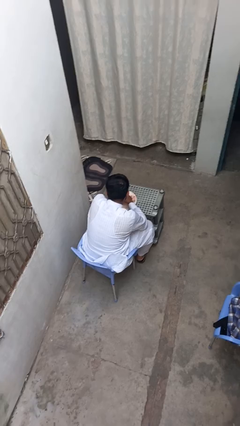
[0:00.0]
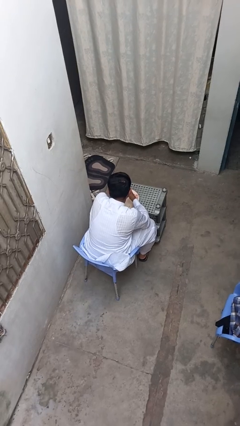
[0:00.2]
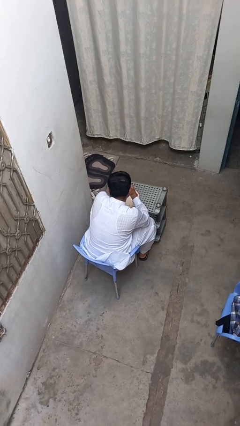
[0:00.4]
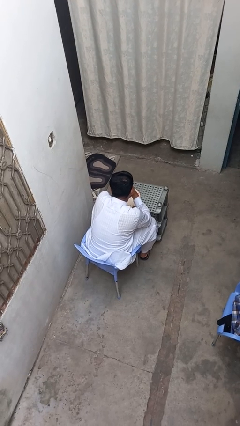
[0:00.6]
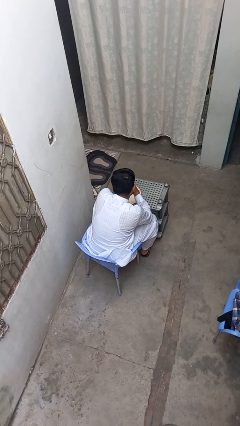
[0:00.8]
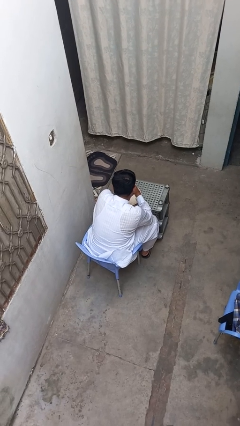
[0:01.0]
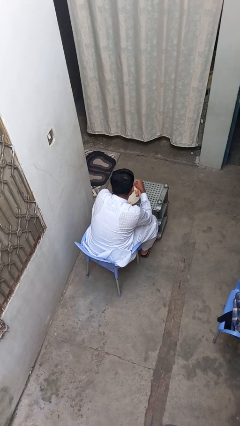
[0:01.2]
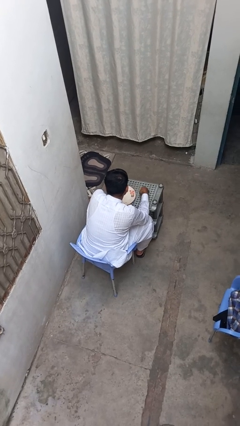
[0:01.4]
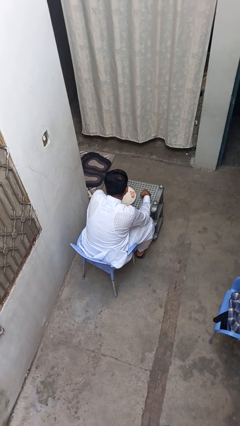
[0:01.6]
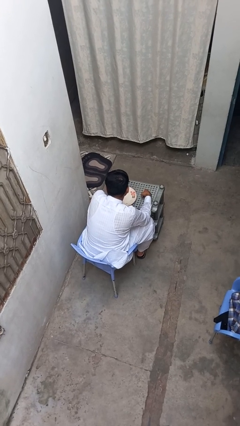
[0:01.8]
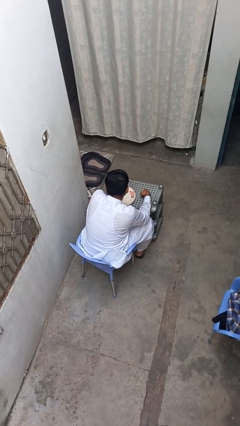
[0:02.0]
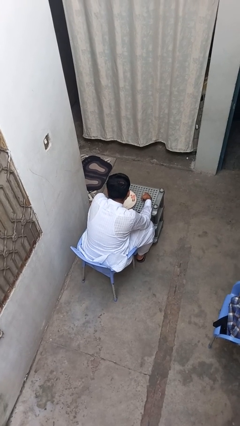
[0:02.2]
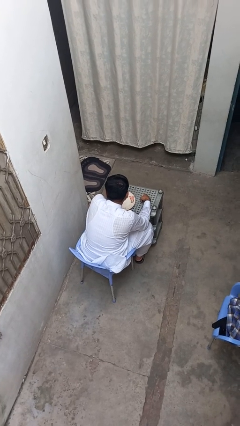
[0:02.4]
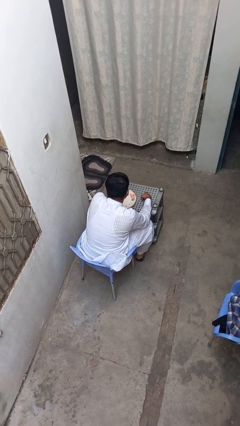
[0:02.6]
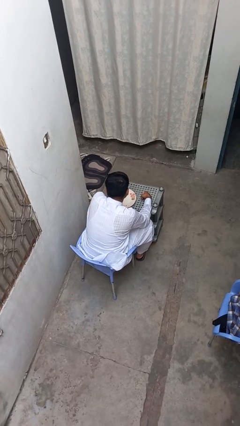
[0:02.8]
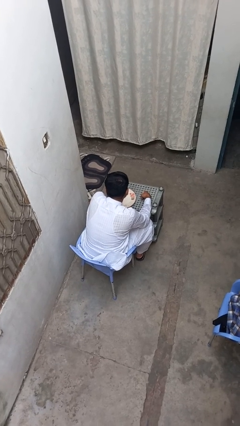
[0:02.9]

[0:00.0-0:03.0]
person eats with hands

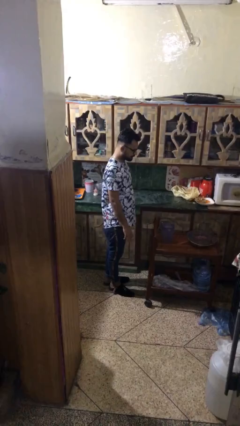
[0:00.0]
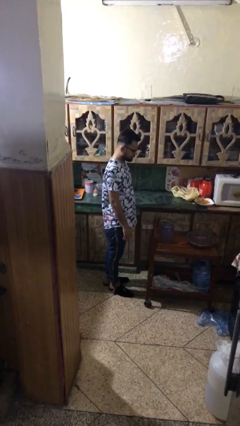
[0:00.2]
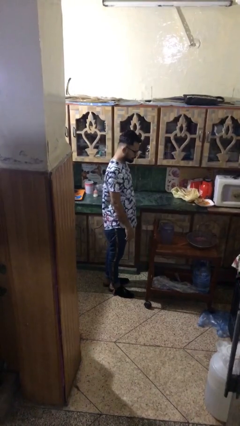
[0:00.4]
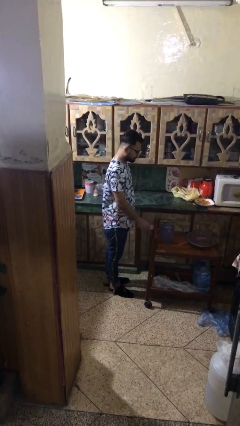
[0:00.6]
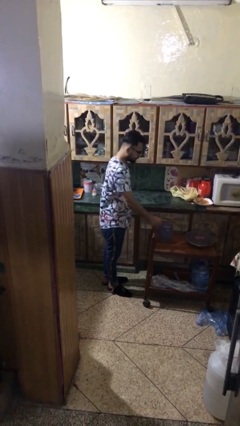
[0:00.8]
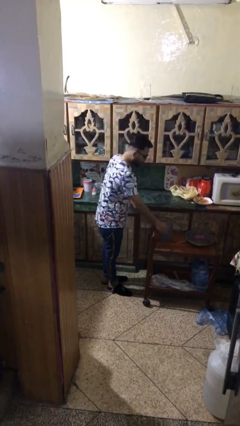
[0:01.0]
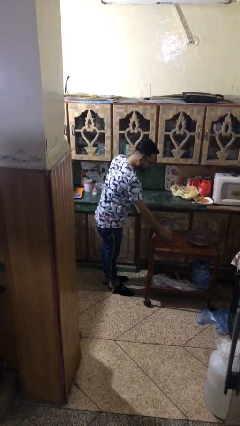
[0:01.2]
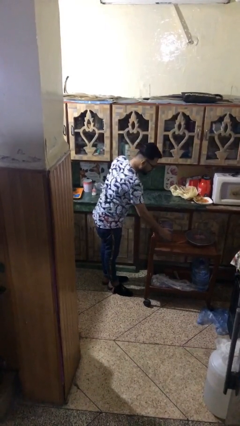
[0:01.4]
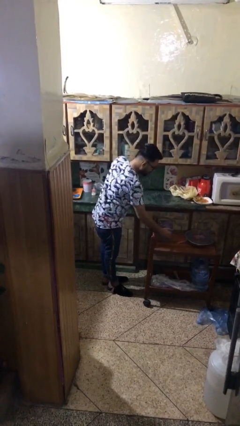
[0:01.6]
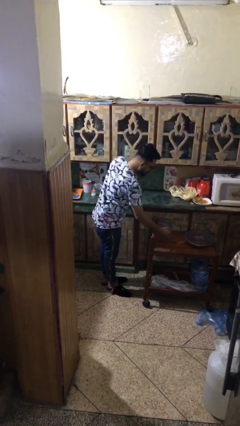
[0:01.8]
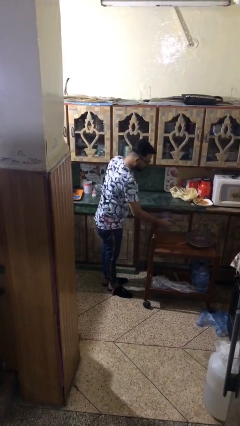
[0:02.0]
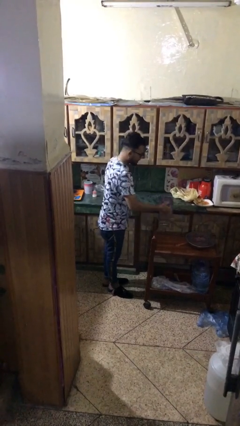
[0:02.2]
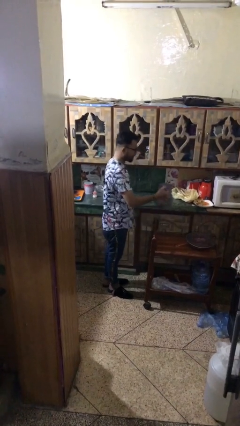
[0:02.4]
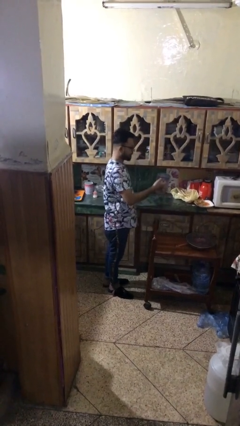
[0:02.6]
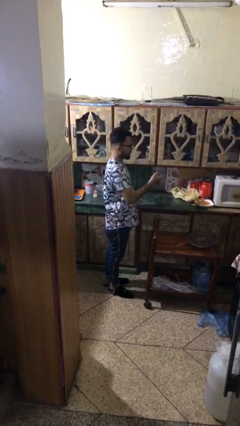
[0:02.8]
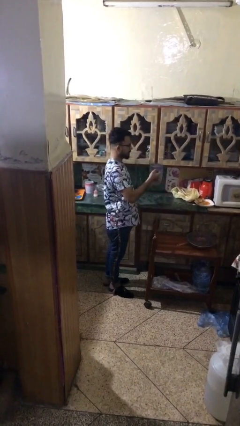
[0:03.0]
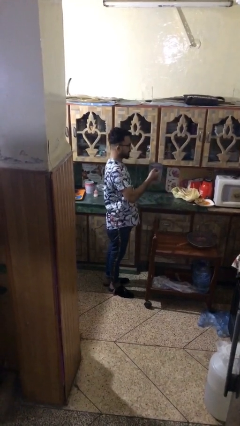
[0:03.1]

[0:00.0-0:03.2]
person picks up object from table

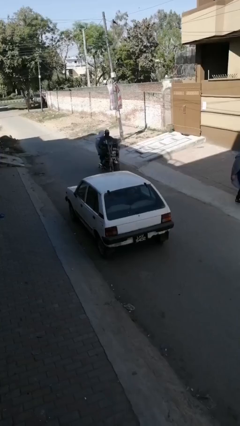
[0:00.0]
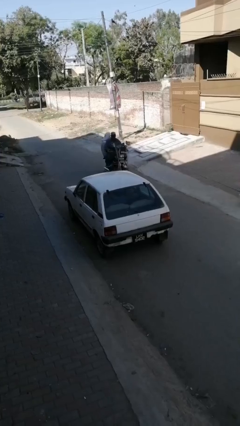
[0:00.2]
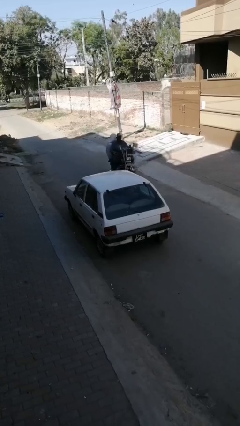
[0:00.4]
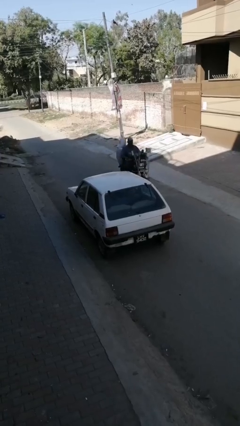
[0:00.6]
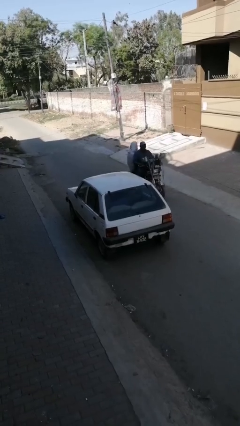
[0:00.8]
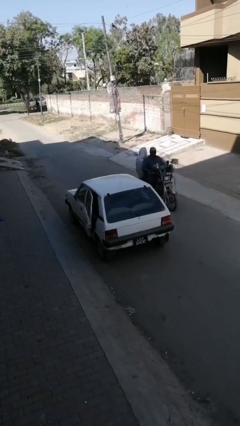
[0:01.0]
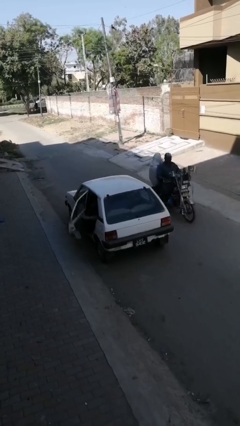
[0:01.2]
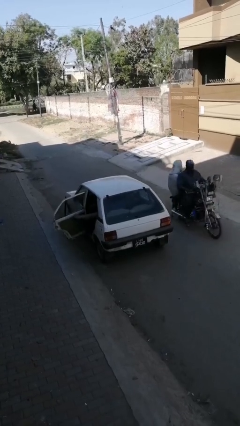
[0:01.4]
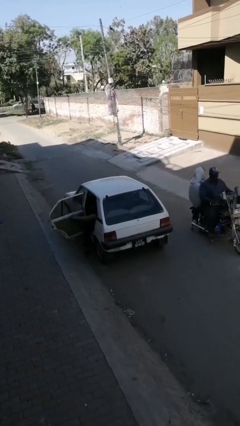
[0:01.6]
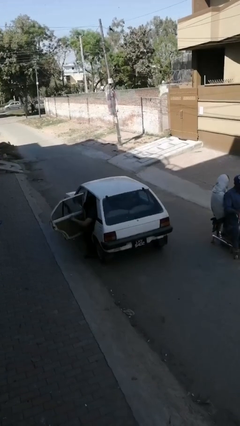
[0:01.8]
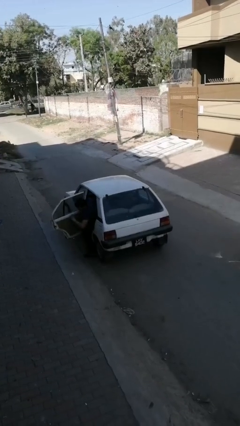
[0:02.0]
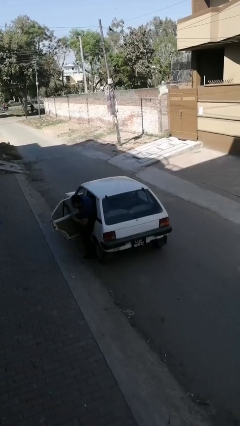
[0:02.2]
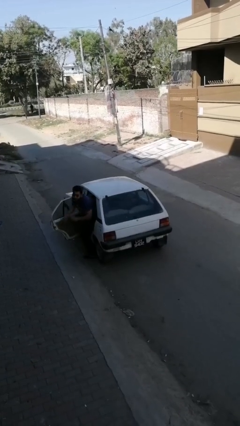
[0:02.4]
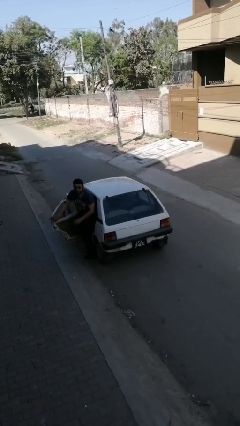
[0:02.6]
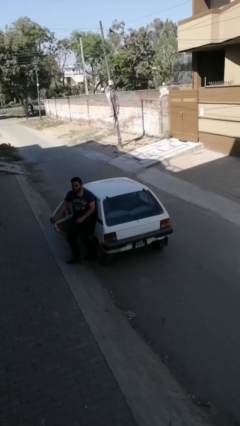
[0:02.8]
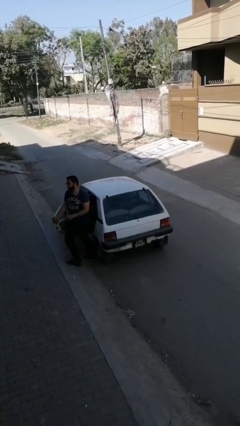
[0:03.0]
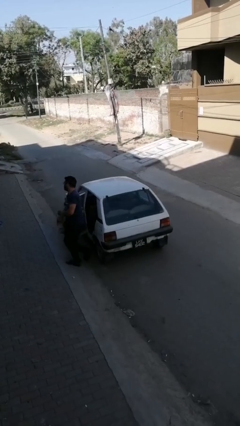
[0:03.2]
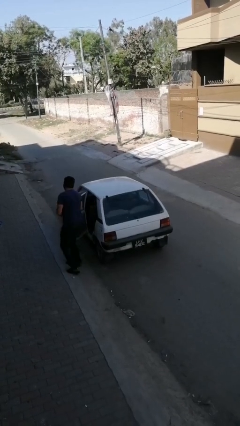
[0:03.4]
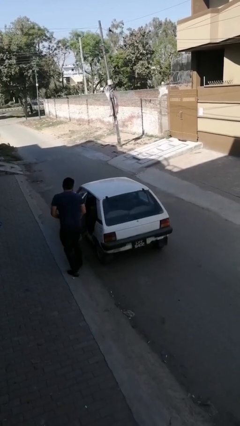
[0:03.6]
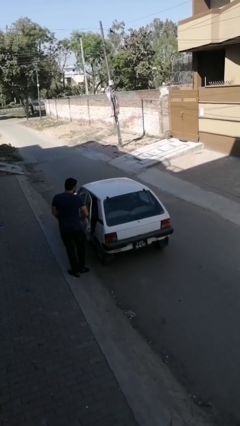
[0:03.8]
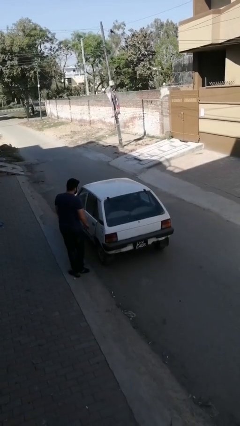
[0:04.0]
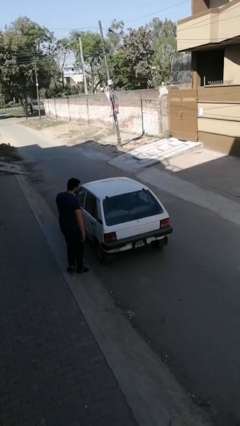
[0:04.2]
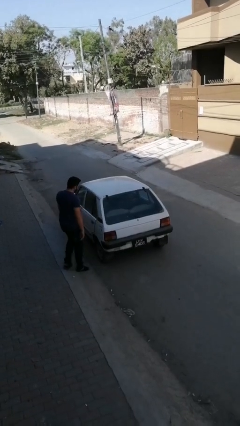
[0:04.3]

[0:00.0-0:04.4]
car drops off person

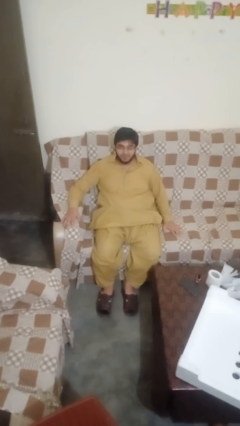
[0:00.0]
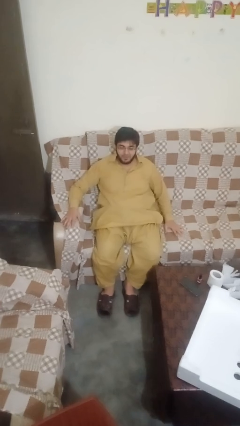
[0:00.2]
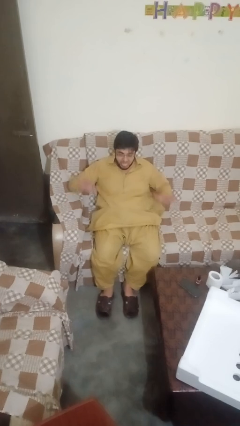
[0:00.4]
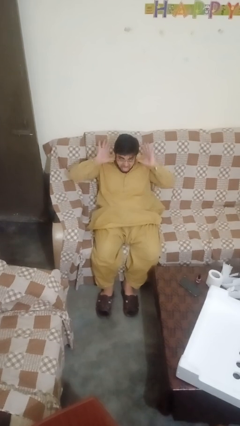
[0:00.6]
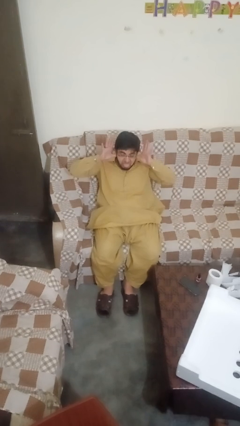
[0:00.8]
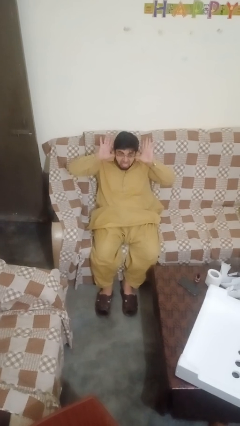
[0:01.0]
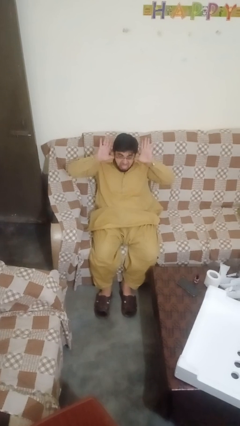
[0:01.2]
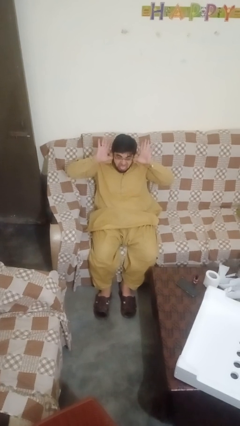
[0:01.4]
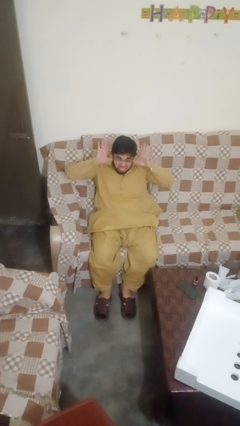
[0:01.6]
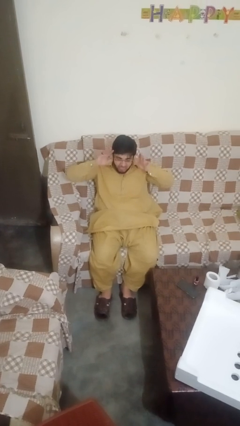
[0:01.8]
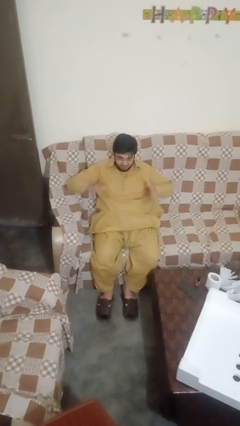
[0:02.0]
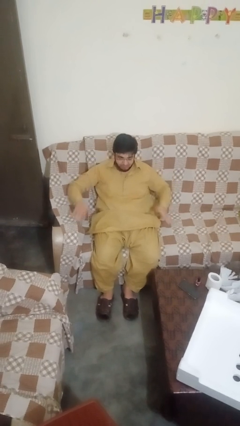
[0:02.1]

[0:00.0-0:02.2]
person sticks out tongue

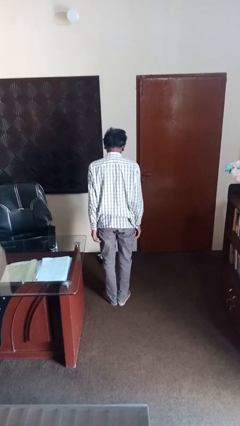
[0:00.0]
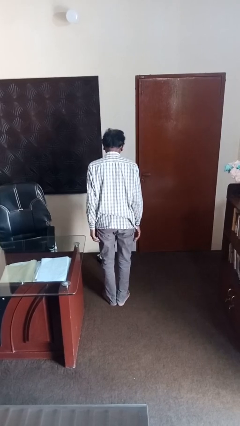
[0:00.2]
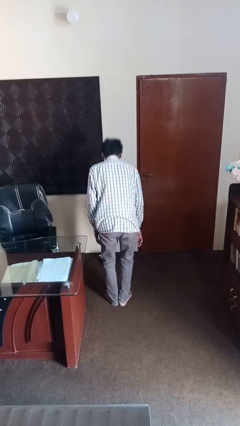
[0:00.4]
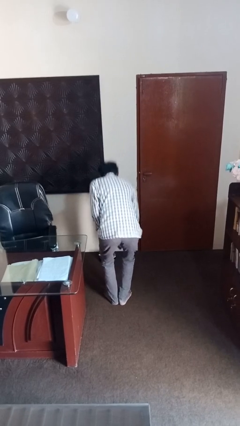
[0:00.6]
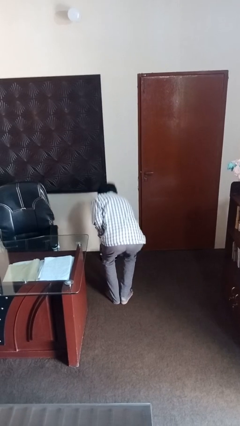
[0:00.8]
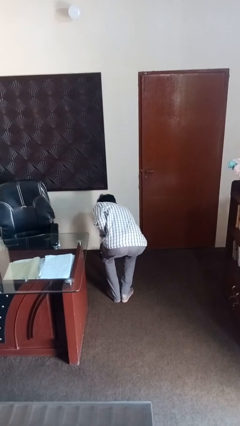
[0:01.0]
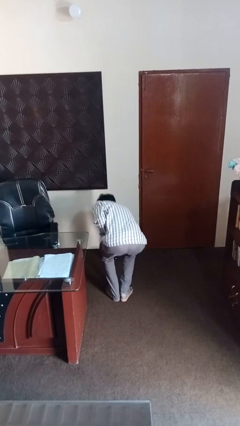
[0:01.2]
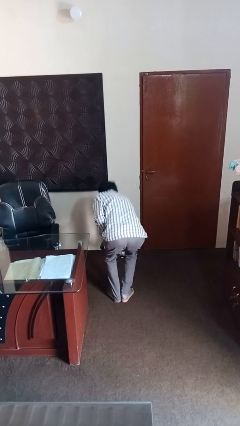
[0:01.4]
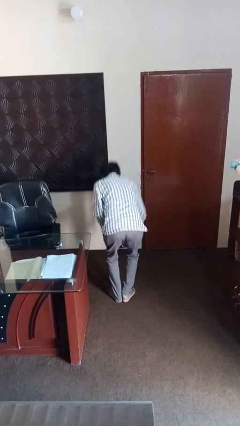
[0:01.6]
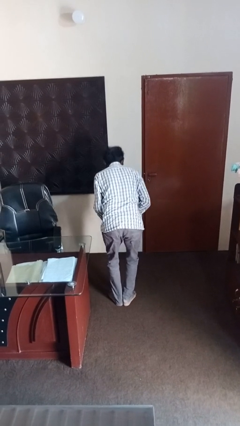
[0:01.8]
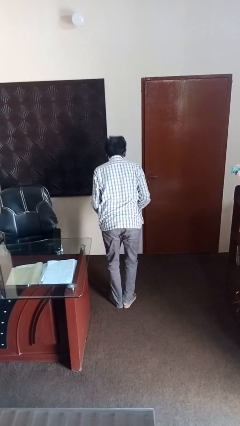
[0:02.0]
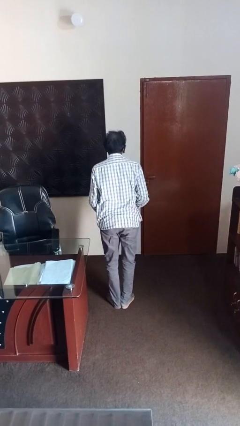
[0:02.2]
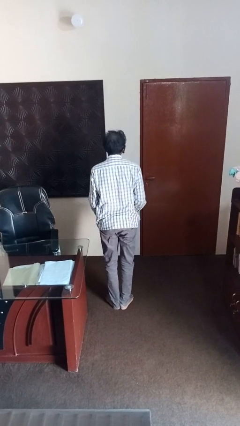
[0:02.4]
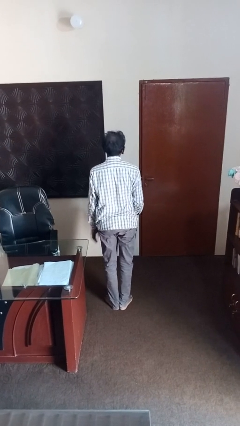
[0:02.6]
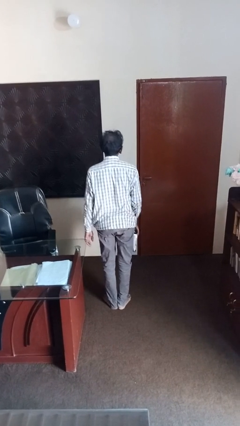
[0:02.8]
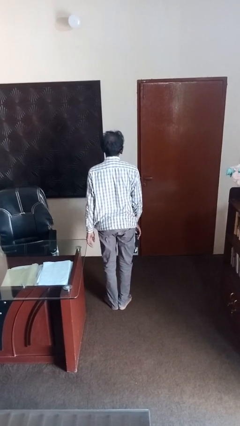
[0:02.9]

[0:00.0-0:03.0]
person picks up object from floor

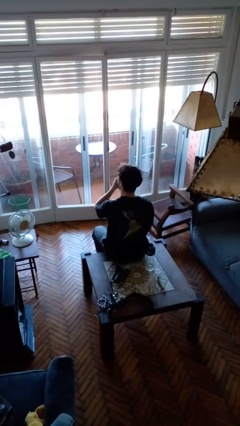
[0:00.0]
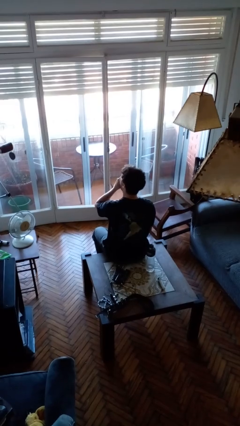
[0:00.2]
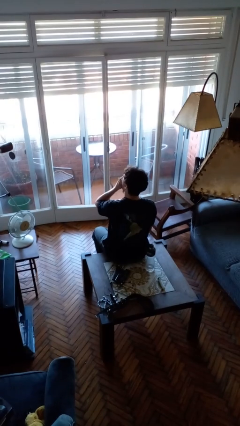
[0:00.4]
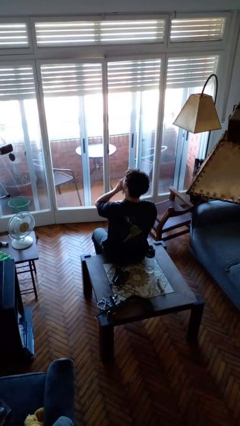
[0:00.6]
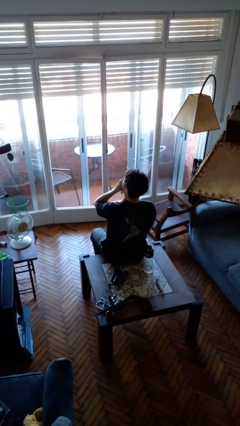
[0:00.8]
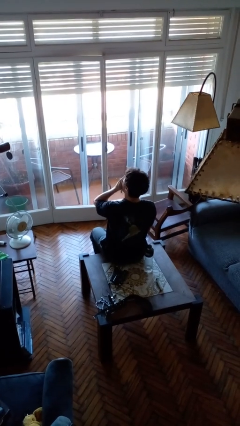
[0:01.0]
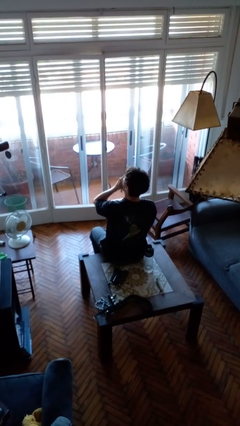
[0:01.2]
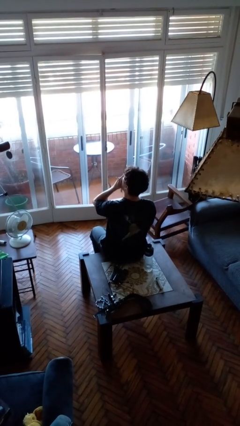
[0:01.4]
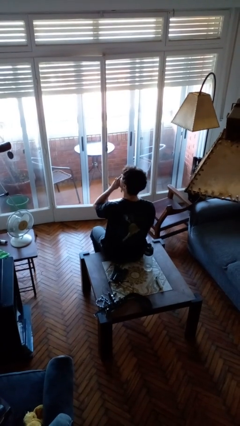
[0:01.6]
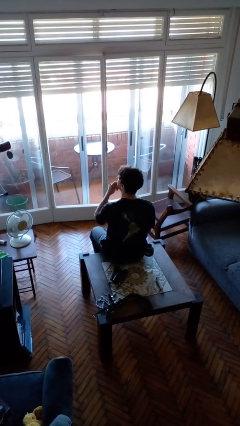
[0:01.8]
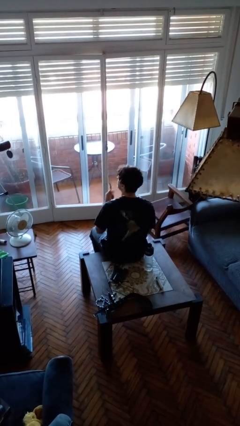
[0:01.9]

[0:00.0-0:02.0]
person yawns
